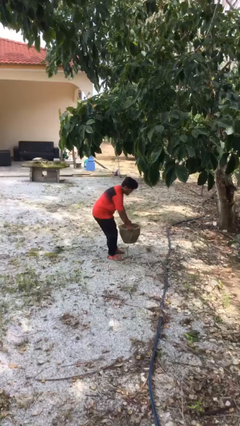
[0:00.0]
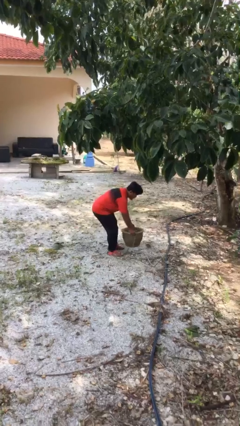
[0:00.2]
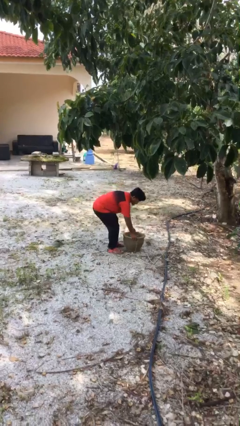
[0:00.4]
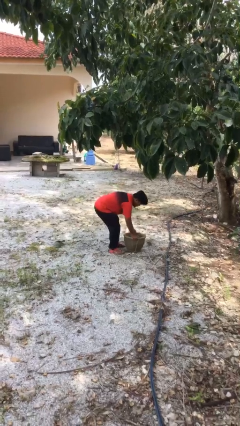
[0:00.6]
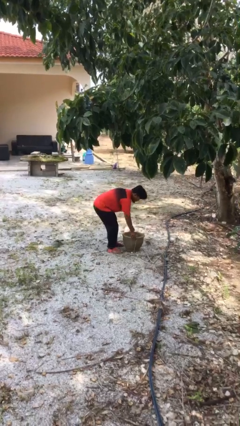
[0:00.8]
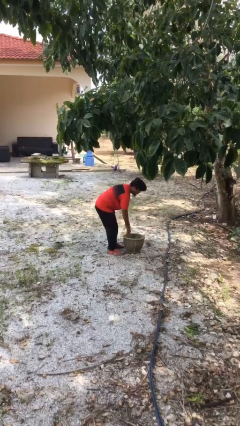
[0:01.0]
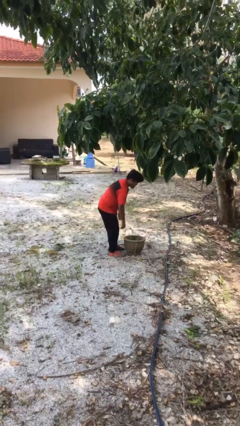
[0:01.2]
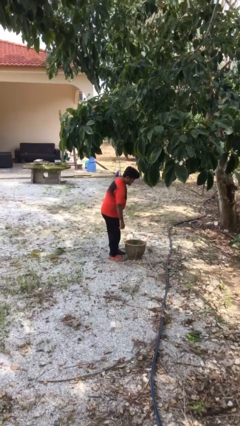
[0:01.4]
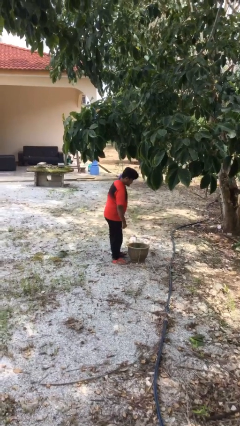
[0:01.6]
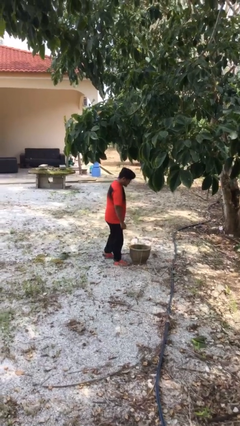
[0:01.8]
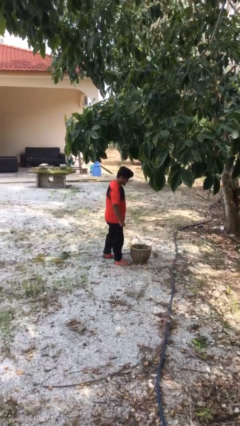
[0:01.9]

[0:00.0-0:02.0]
person puts down object on floor

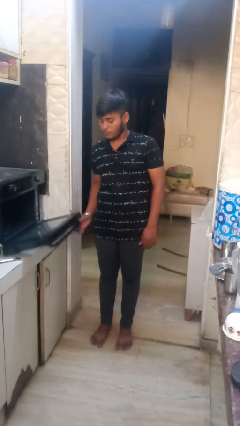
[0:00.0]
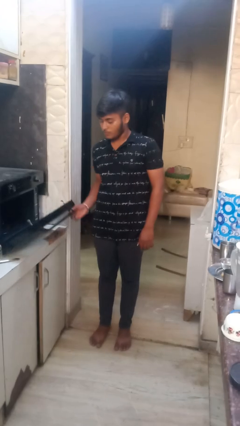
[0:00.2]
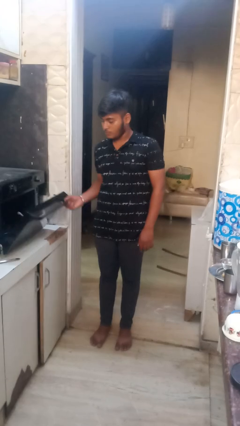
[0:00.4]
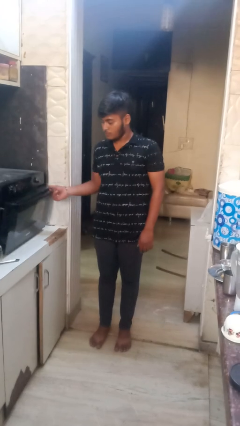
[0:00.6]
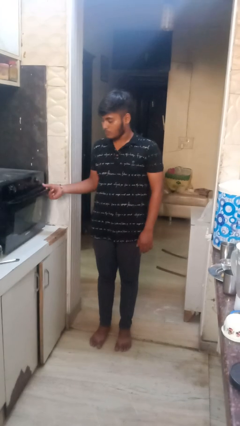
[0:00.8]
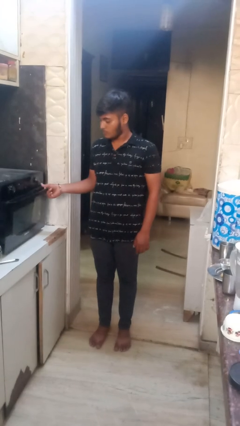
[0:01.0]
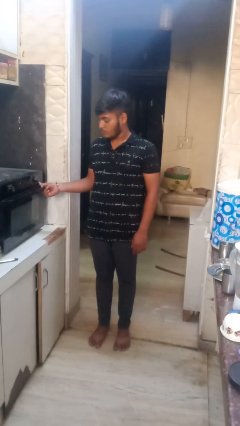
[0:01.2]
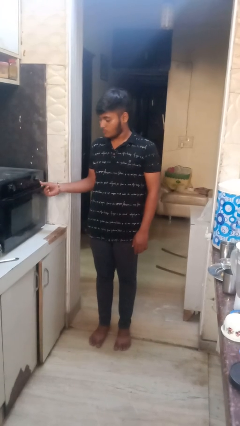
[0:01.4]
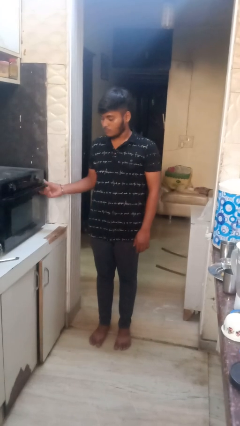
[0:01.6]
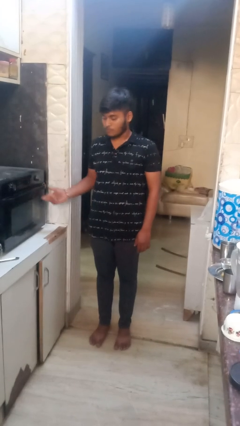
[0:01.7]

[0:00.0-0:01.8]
person closes oven door

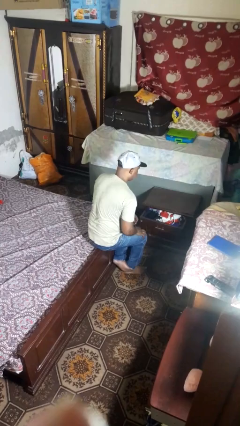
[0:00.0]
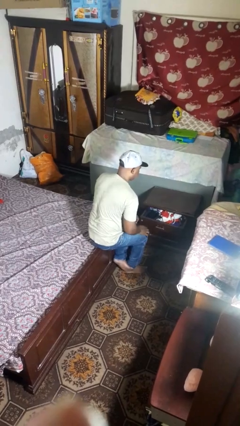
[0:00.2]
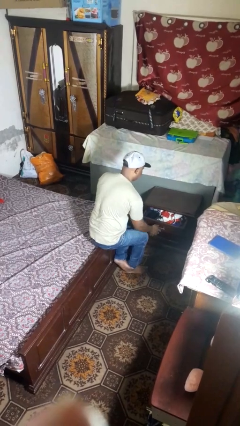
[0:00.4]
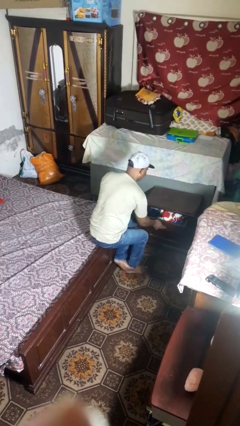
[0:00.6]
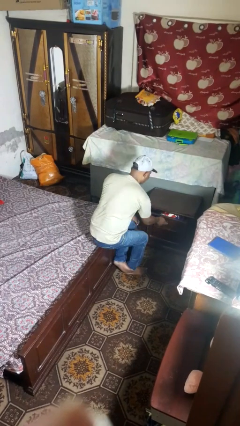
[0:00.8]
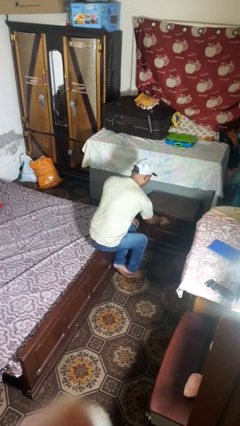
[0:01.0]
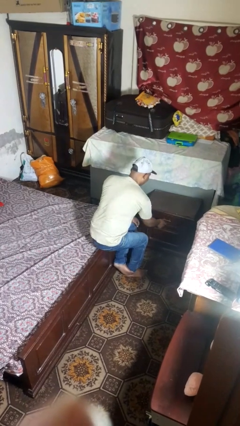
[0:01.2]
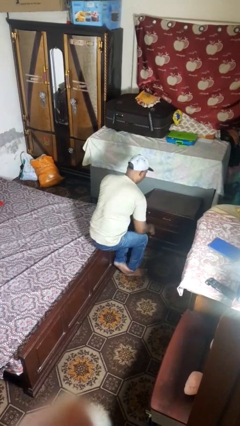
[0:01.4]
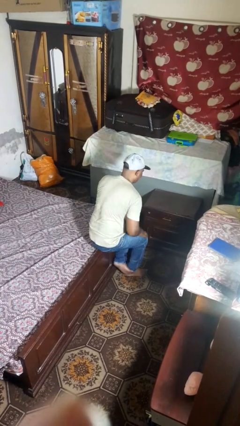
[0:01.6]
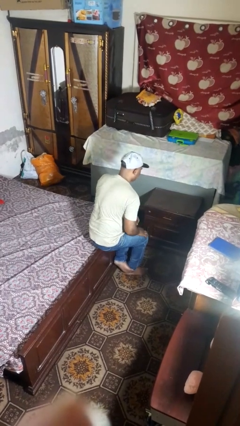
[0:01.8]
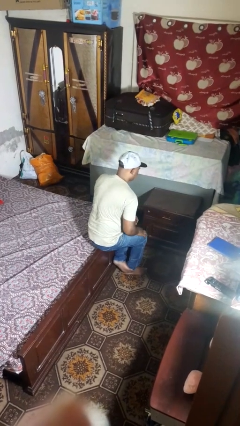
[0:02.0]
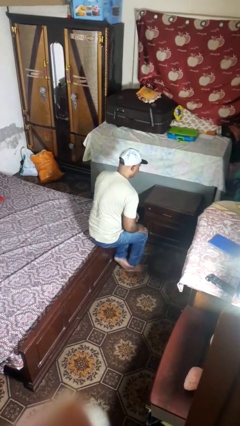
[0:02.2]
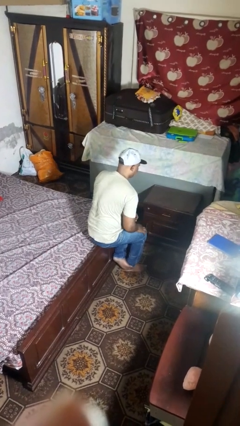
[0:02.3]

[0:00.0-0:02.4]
person closes dresser drawer

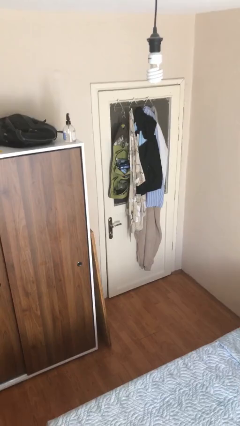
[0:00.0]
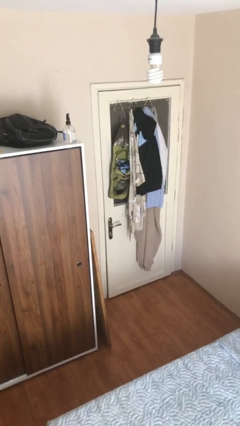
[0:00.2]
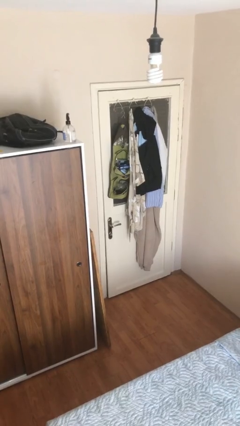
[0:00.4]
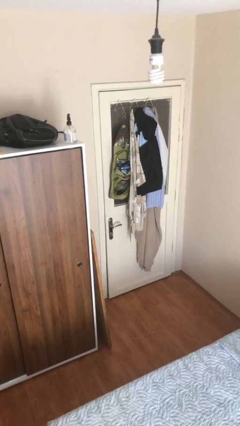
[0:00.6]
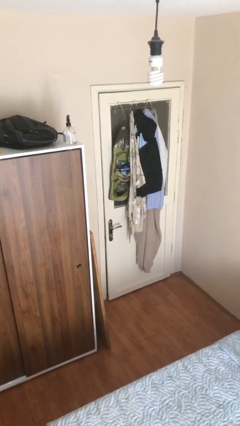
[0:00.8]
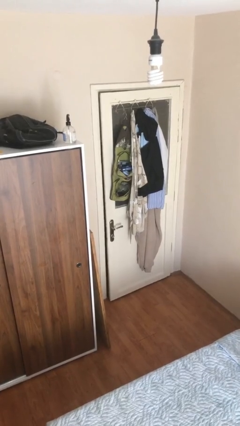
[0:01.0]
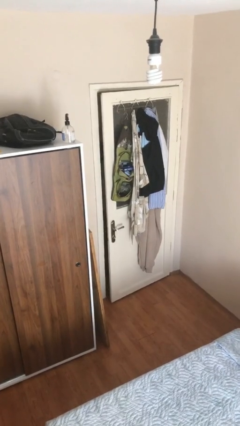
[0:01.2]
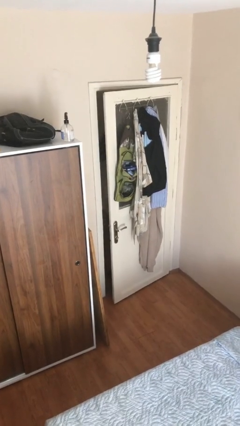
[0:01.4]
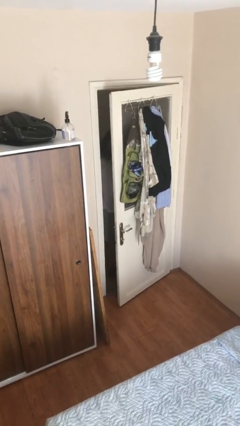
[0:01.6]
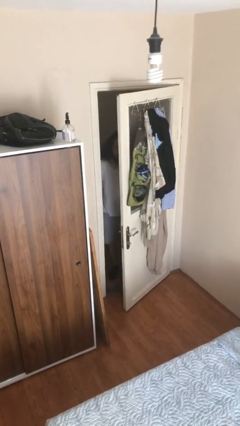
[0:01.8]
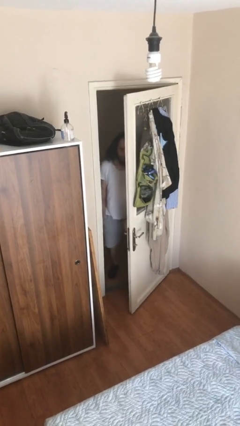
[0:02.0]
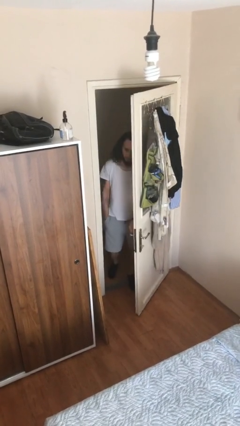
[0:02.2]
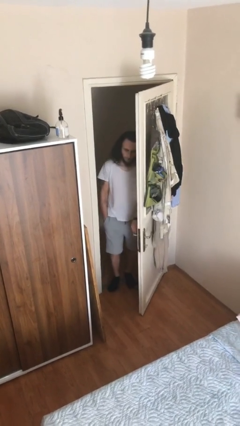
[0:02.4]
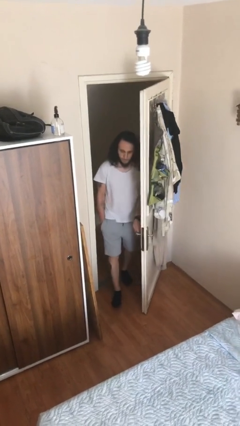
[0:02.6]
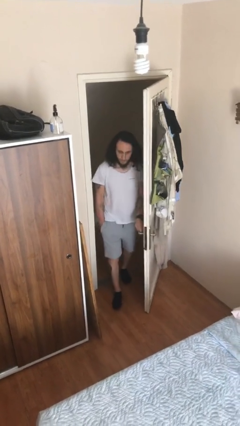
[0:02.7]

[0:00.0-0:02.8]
person opens facility door

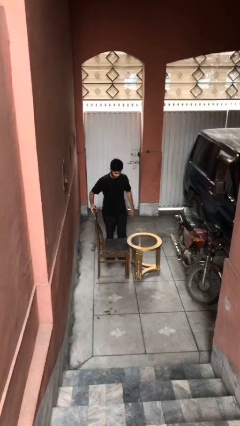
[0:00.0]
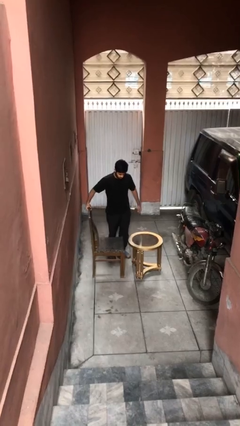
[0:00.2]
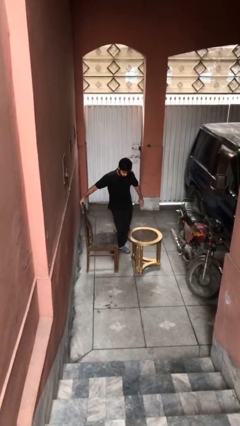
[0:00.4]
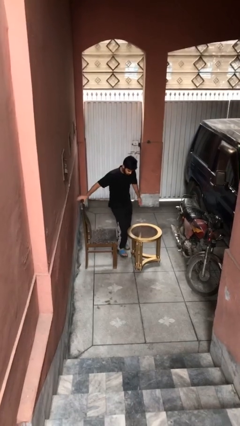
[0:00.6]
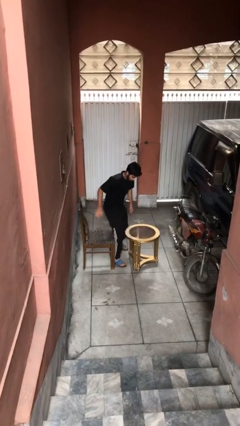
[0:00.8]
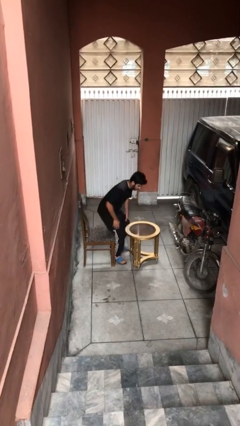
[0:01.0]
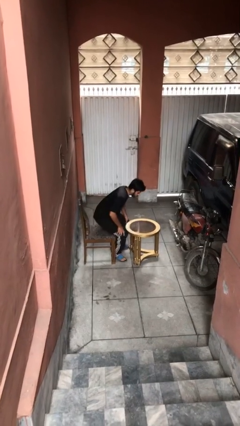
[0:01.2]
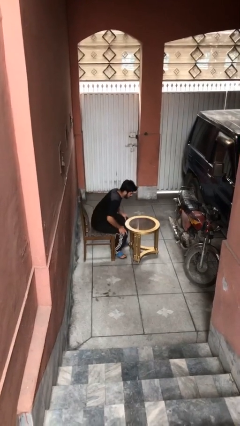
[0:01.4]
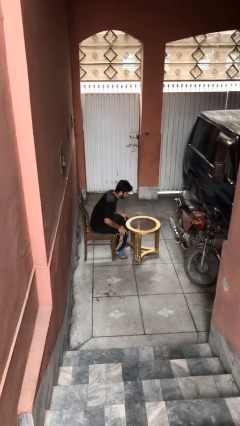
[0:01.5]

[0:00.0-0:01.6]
person sits down

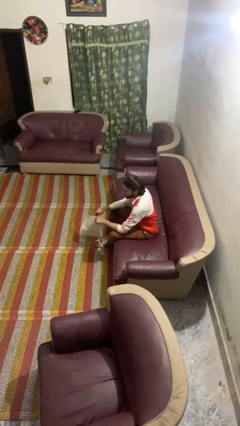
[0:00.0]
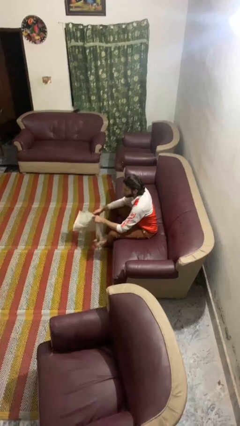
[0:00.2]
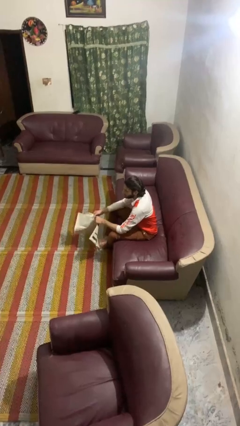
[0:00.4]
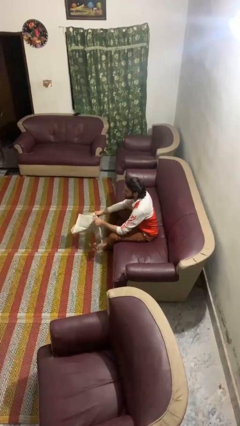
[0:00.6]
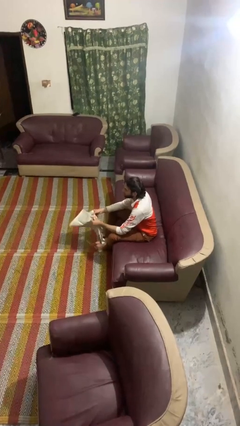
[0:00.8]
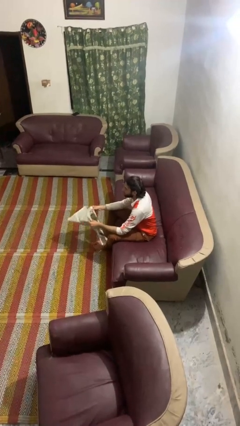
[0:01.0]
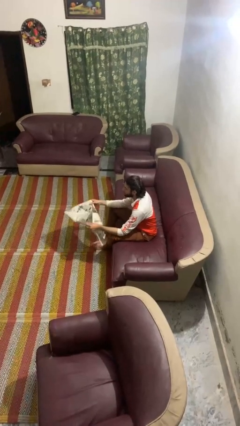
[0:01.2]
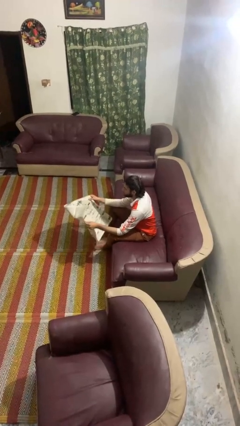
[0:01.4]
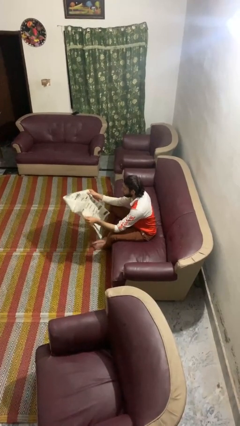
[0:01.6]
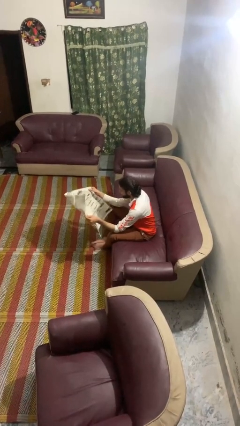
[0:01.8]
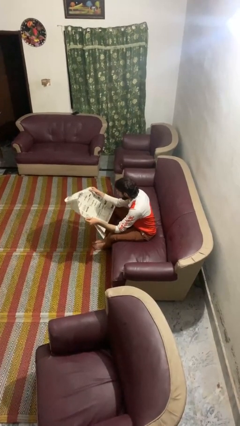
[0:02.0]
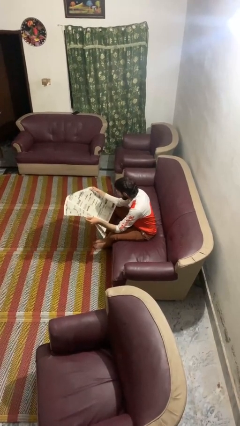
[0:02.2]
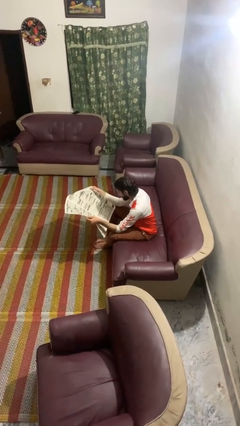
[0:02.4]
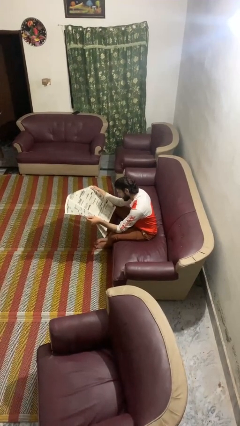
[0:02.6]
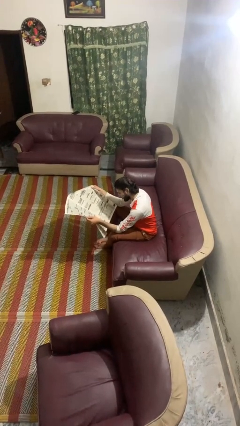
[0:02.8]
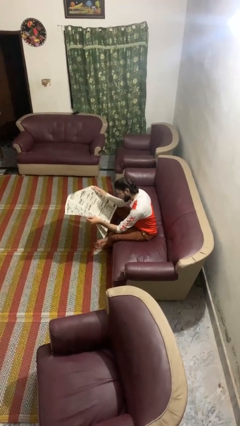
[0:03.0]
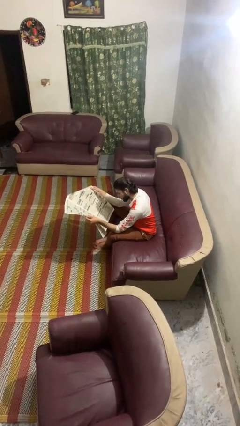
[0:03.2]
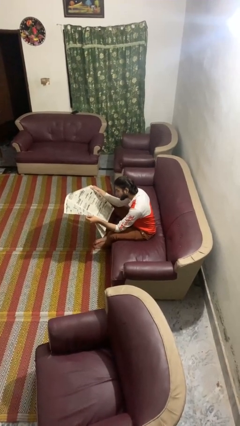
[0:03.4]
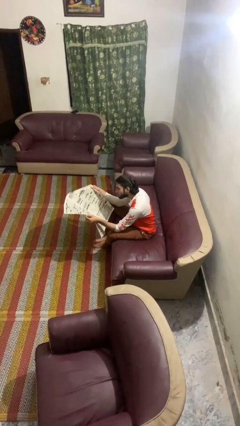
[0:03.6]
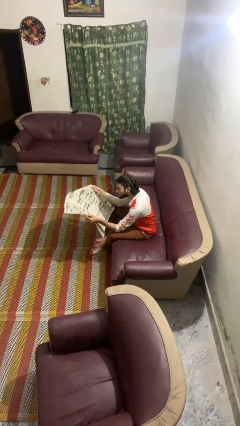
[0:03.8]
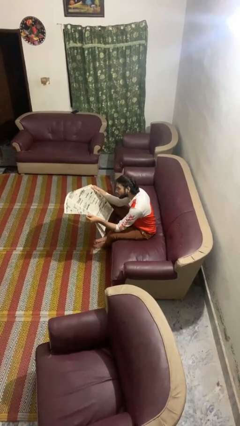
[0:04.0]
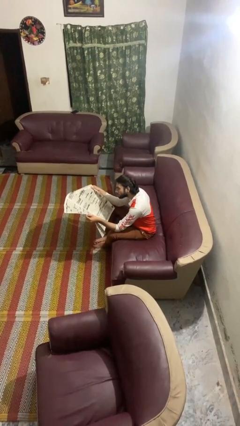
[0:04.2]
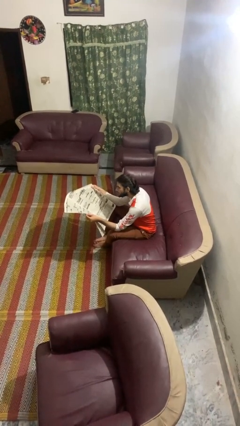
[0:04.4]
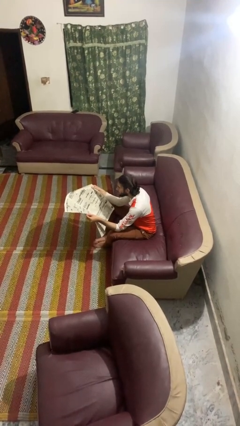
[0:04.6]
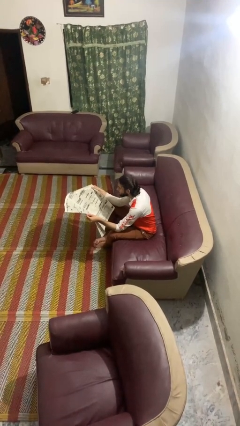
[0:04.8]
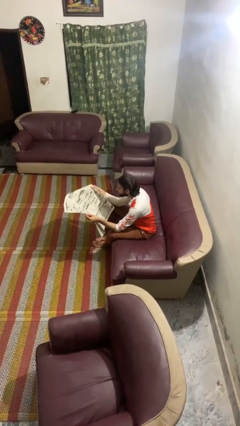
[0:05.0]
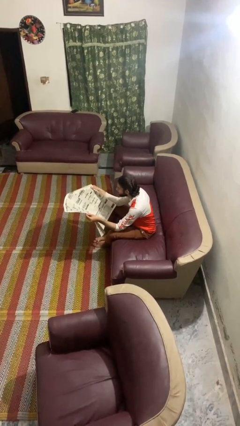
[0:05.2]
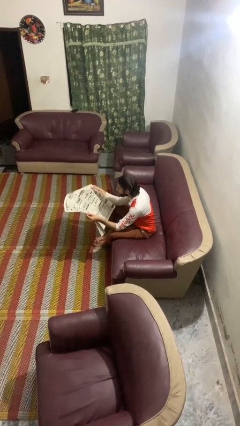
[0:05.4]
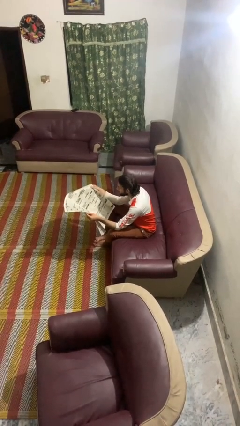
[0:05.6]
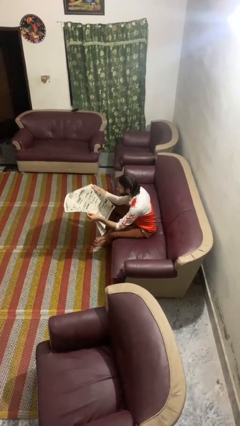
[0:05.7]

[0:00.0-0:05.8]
person reads newspaper

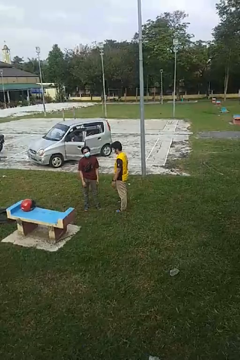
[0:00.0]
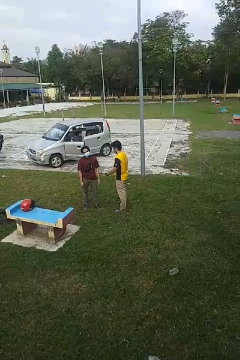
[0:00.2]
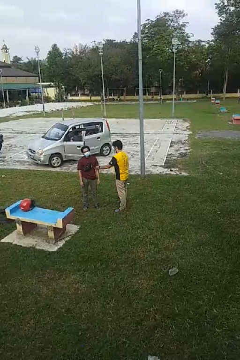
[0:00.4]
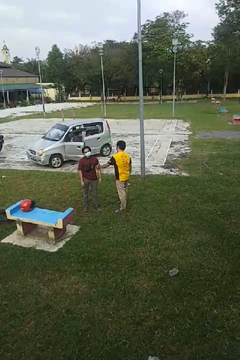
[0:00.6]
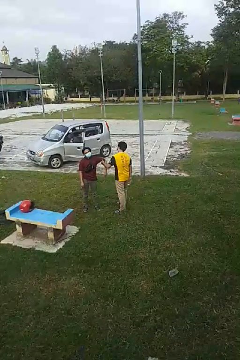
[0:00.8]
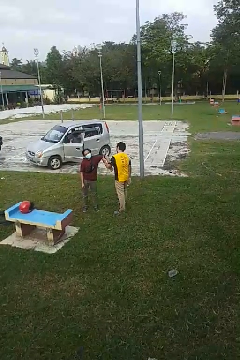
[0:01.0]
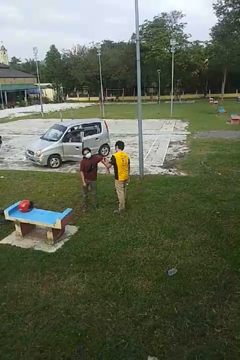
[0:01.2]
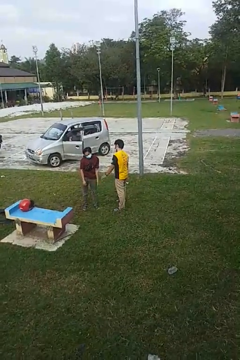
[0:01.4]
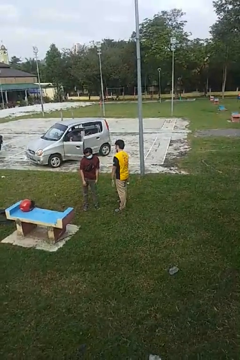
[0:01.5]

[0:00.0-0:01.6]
person grabs person by bicep
